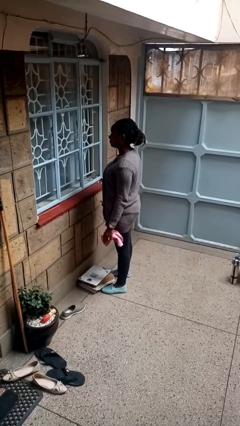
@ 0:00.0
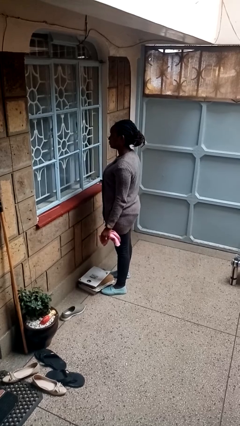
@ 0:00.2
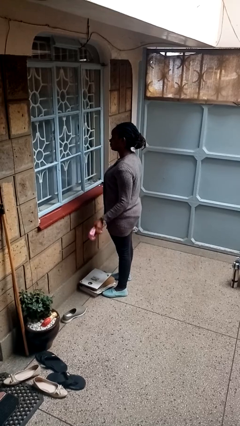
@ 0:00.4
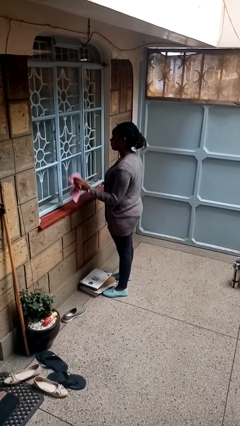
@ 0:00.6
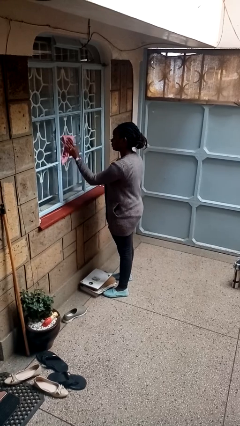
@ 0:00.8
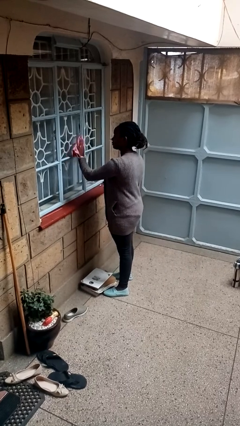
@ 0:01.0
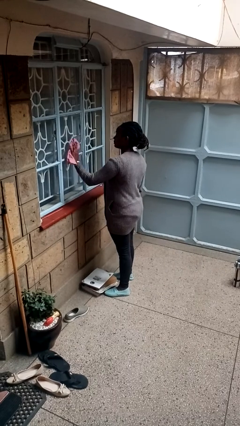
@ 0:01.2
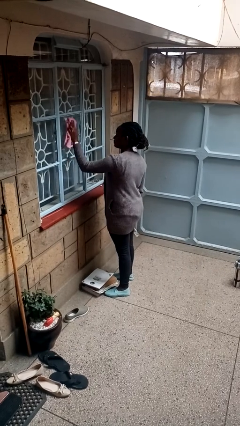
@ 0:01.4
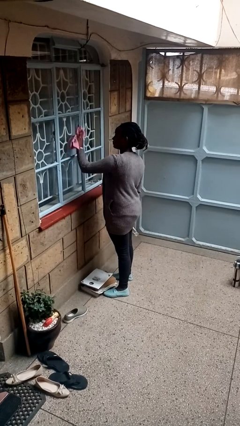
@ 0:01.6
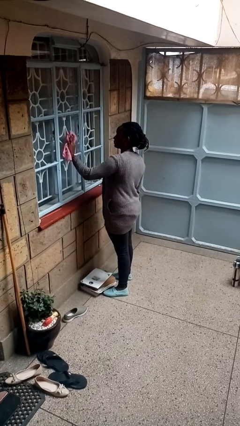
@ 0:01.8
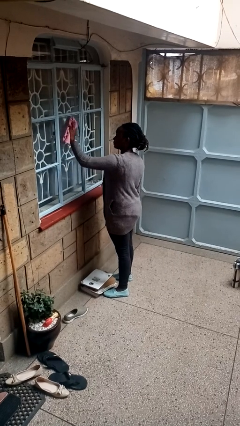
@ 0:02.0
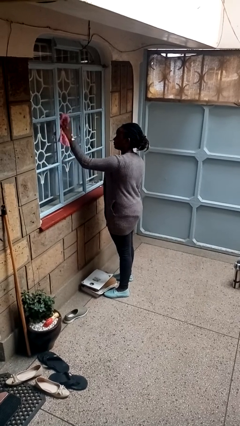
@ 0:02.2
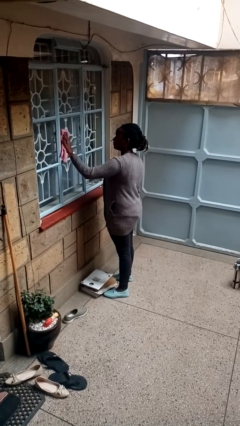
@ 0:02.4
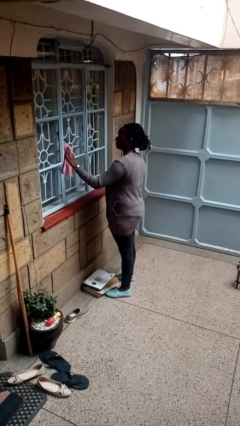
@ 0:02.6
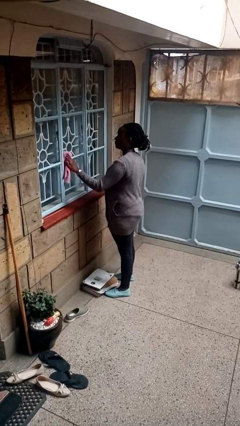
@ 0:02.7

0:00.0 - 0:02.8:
person washes window

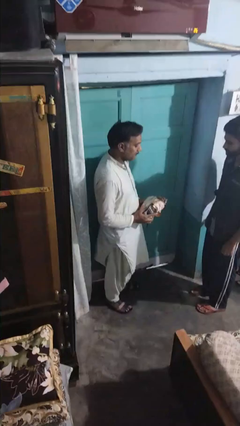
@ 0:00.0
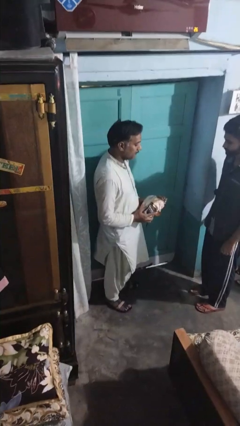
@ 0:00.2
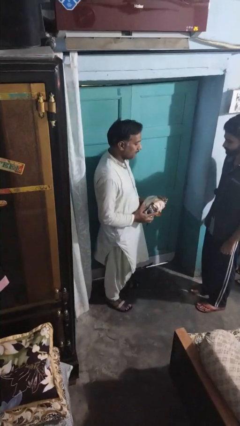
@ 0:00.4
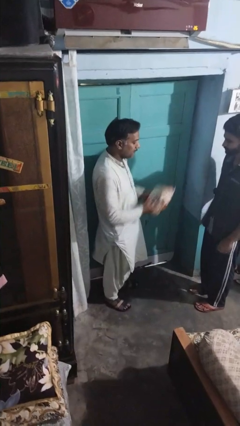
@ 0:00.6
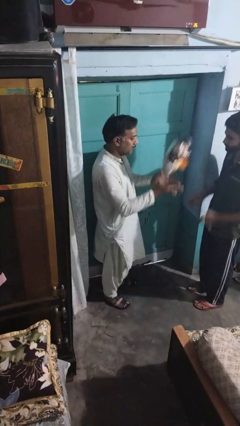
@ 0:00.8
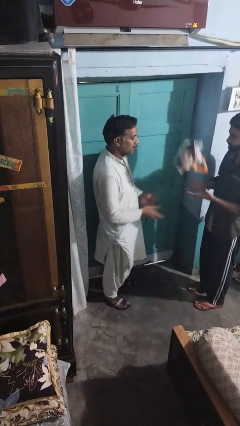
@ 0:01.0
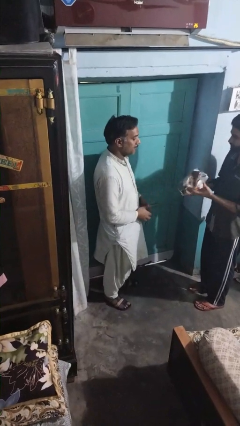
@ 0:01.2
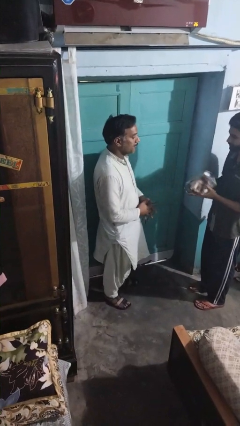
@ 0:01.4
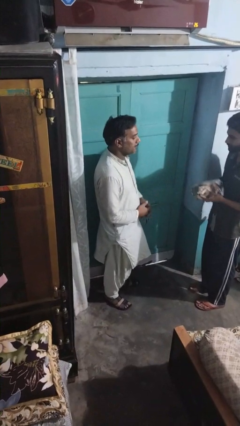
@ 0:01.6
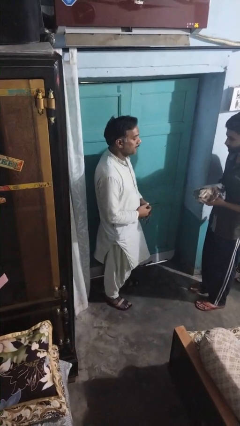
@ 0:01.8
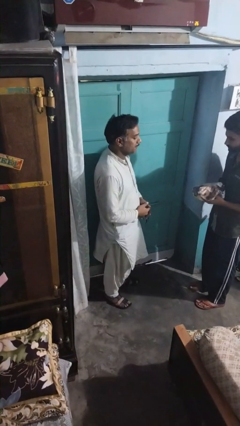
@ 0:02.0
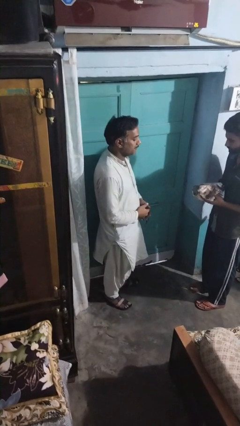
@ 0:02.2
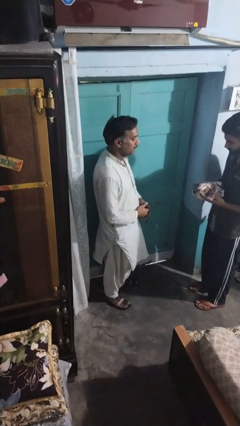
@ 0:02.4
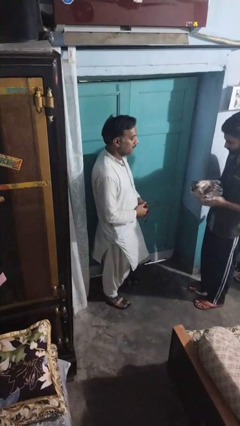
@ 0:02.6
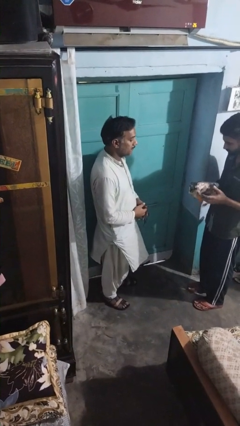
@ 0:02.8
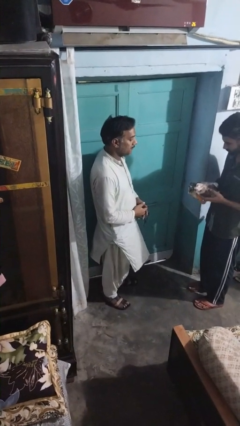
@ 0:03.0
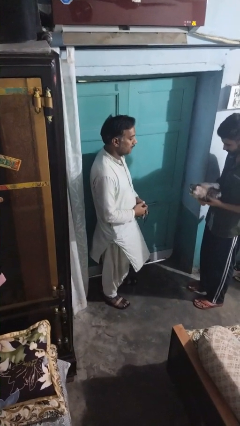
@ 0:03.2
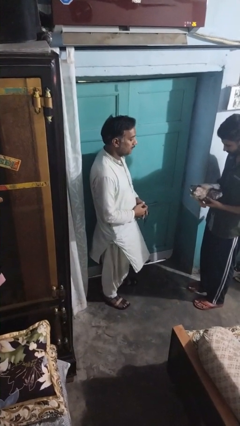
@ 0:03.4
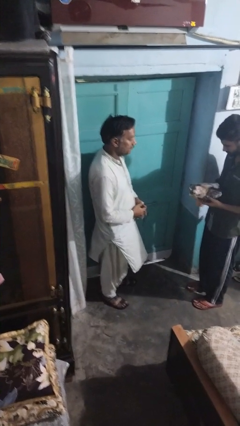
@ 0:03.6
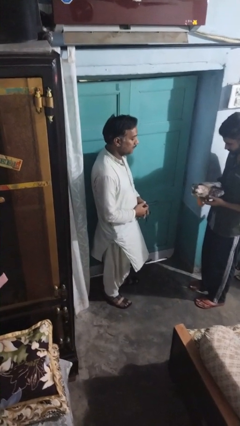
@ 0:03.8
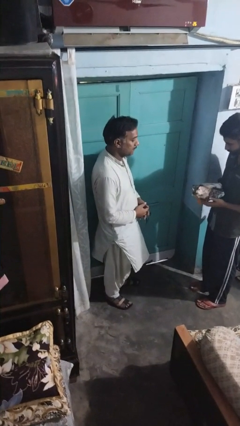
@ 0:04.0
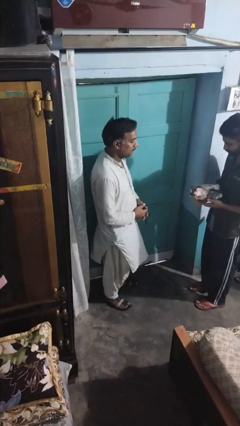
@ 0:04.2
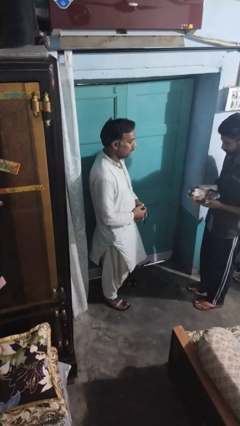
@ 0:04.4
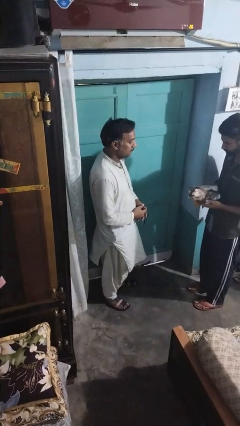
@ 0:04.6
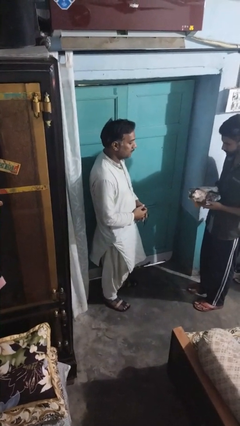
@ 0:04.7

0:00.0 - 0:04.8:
person throws object to person

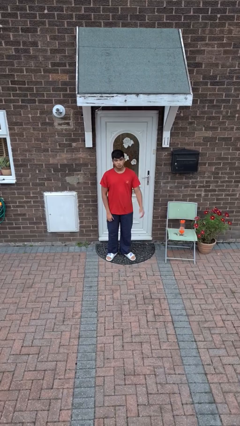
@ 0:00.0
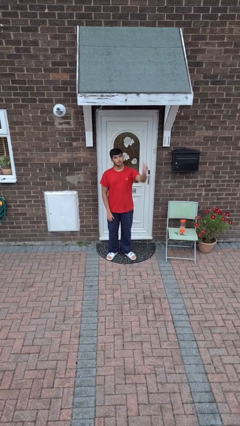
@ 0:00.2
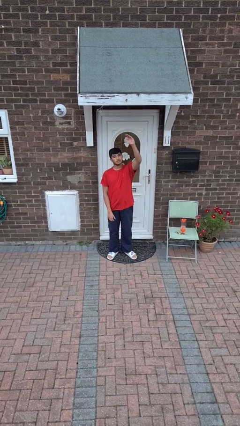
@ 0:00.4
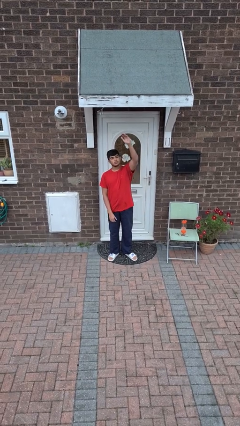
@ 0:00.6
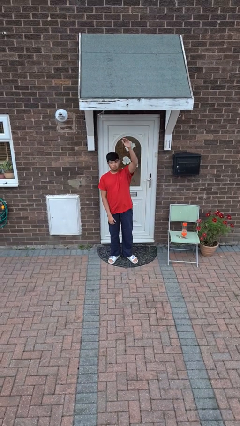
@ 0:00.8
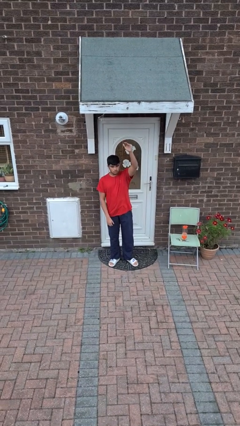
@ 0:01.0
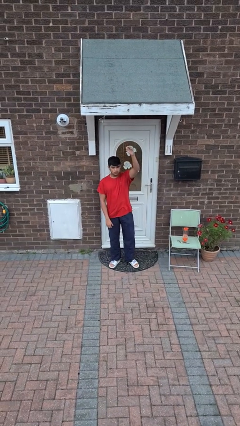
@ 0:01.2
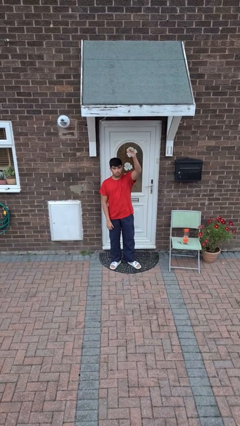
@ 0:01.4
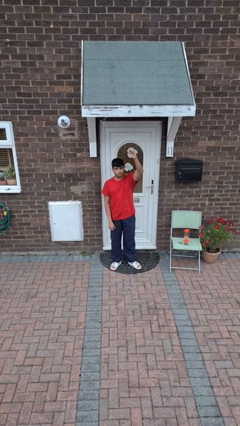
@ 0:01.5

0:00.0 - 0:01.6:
person gestures raise hand

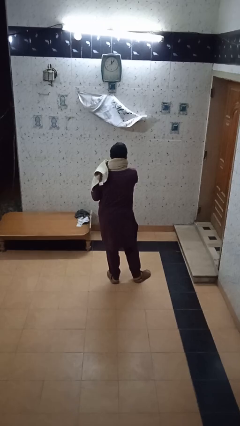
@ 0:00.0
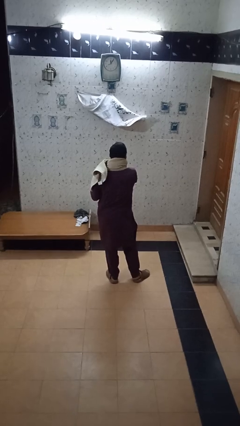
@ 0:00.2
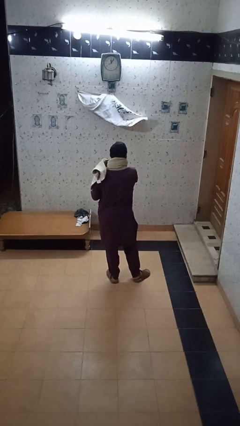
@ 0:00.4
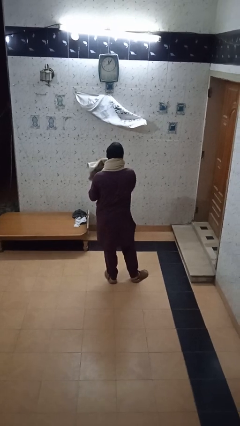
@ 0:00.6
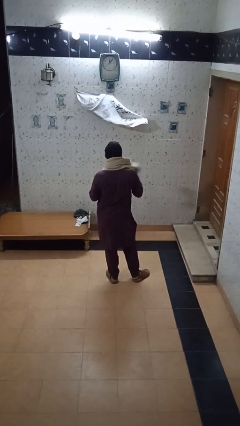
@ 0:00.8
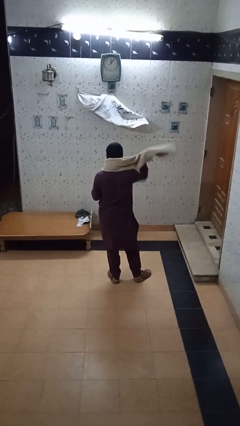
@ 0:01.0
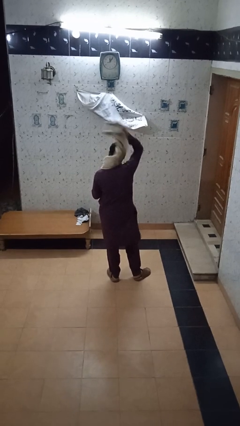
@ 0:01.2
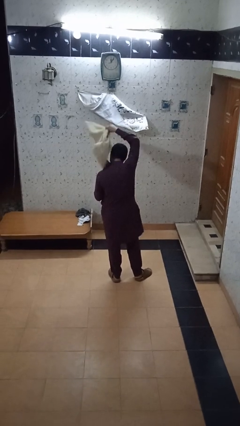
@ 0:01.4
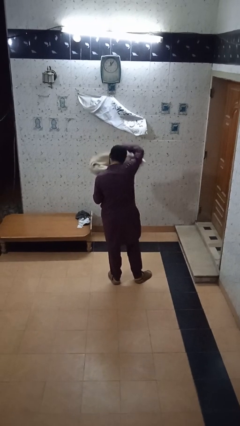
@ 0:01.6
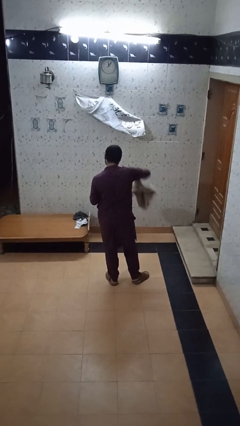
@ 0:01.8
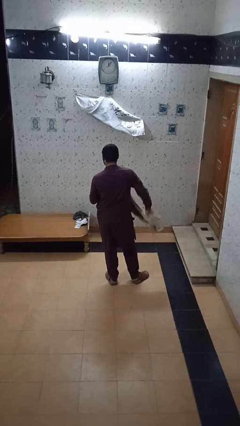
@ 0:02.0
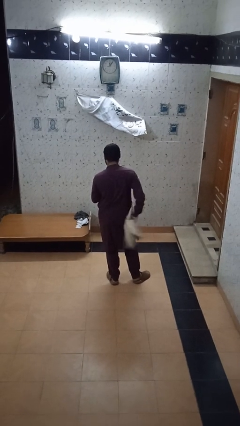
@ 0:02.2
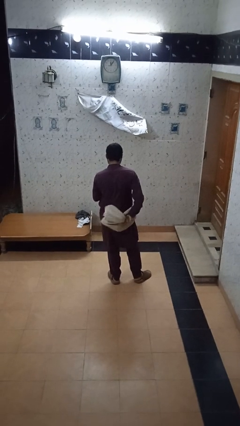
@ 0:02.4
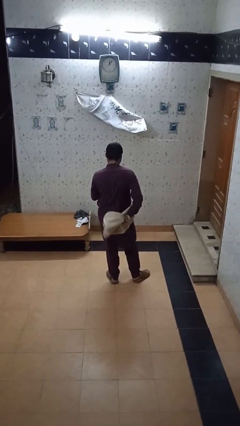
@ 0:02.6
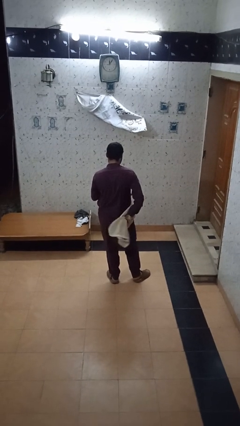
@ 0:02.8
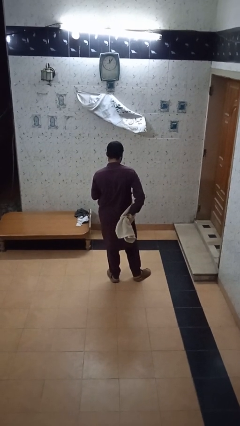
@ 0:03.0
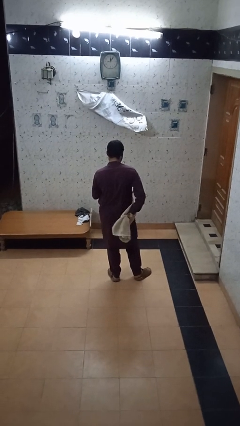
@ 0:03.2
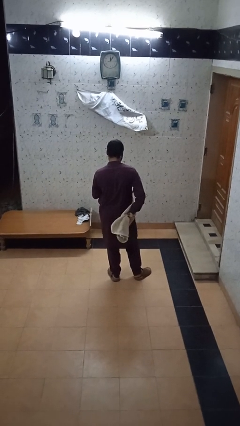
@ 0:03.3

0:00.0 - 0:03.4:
person takes off scarf

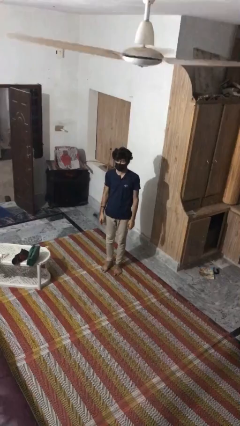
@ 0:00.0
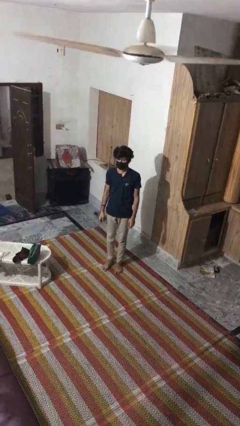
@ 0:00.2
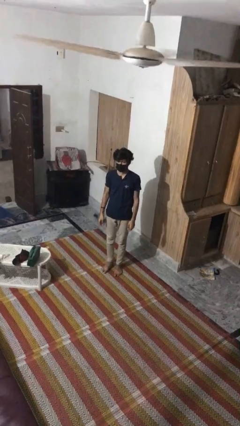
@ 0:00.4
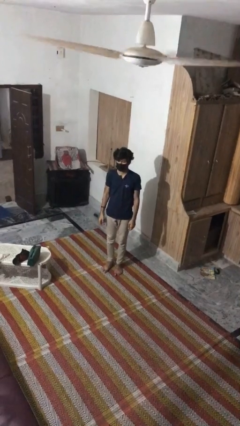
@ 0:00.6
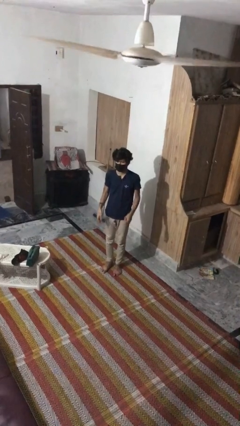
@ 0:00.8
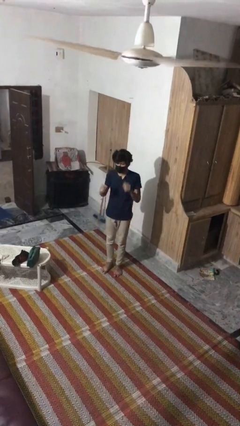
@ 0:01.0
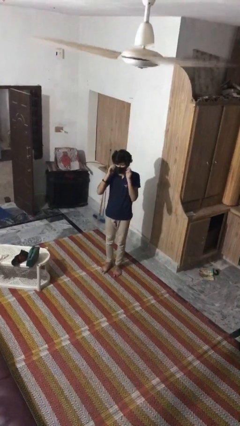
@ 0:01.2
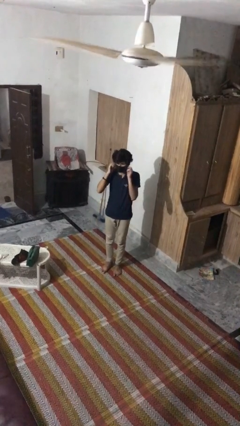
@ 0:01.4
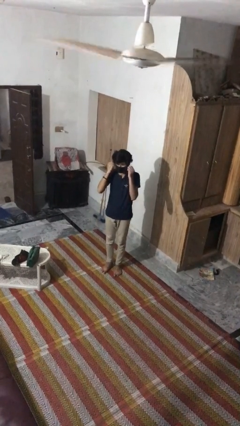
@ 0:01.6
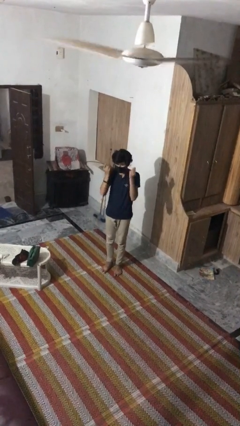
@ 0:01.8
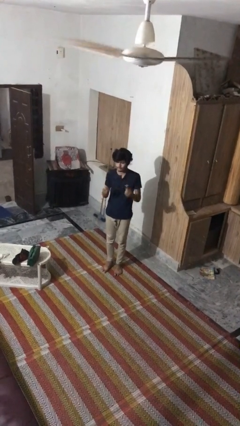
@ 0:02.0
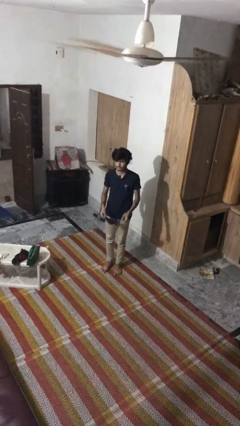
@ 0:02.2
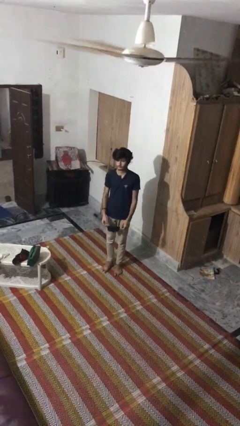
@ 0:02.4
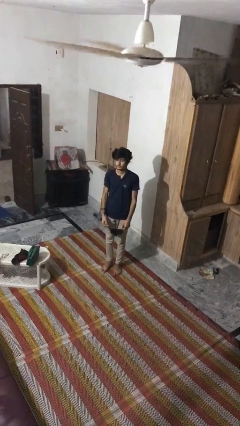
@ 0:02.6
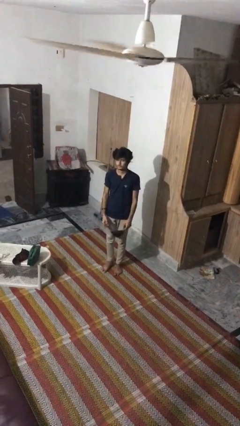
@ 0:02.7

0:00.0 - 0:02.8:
person takes off facemask

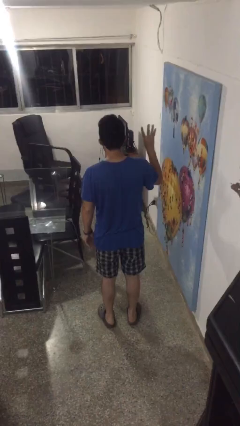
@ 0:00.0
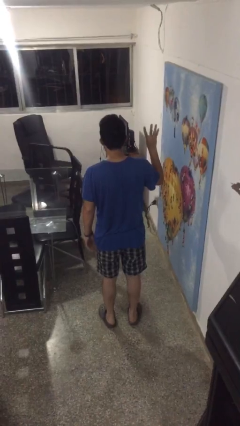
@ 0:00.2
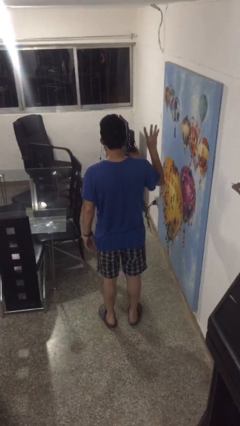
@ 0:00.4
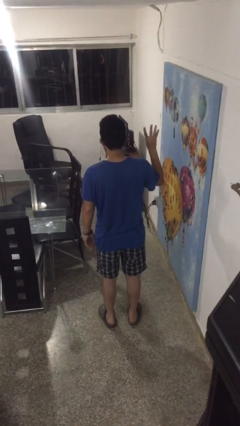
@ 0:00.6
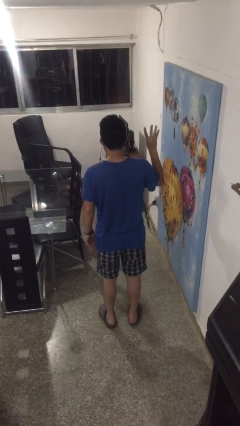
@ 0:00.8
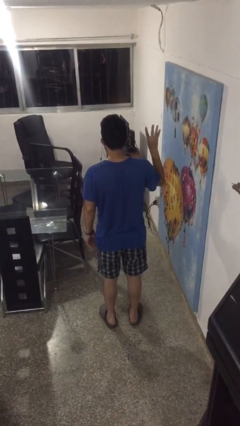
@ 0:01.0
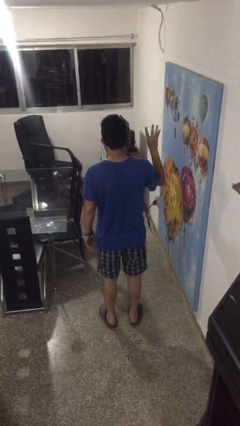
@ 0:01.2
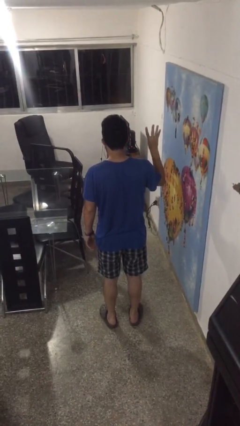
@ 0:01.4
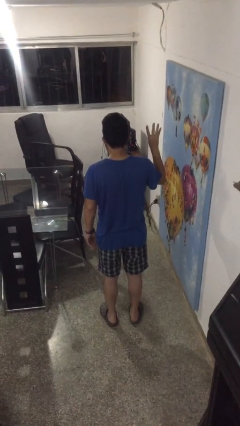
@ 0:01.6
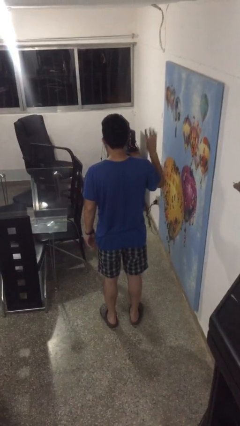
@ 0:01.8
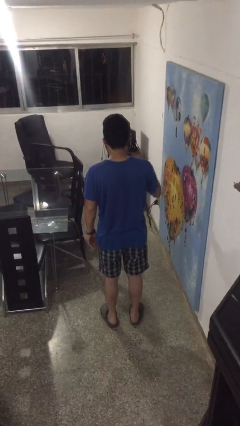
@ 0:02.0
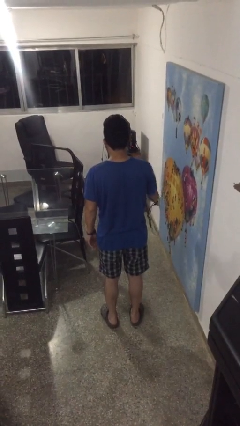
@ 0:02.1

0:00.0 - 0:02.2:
person gestures number four

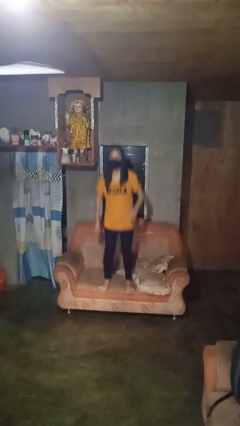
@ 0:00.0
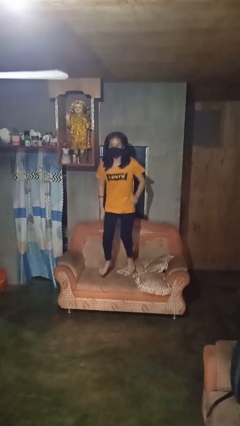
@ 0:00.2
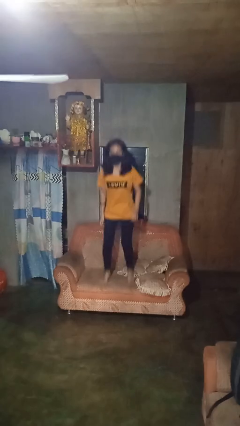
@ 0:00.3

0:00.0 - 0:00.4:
person jumps on couch
